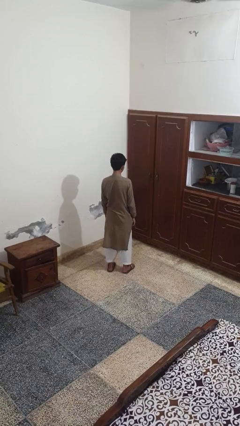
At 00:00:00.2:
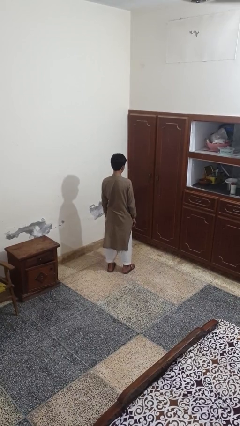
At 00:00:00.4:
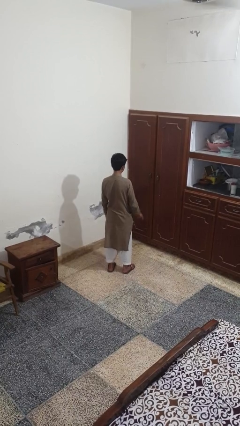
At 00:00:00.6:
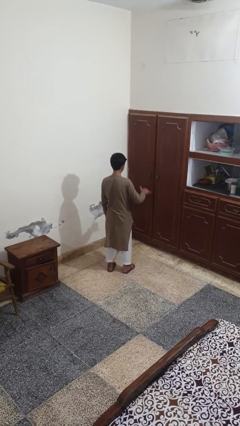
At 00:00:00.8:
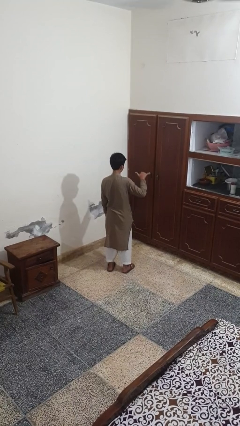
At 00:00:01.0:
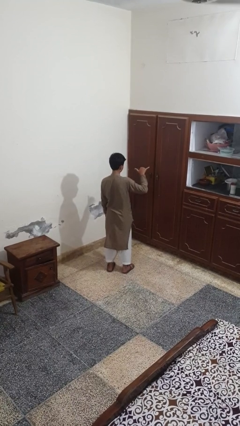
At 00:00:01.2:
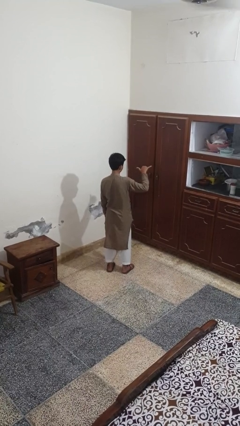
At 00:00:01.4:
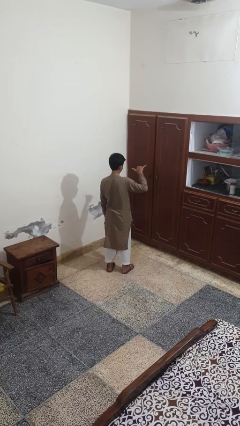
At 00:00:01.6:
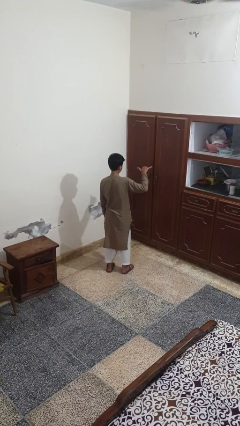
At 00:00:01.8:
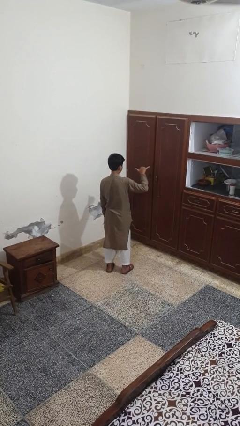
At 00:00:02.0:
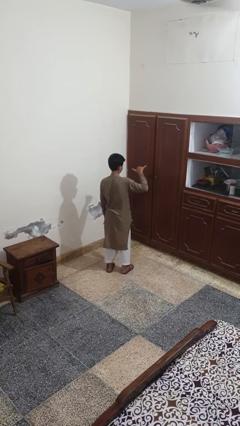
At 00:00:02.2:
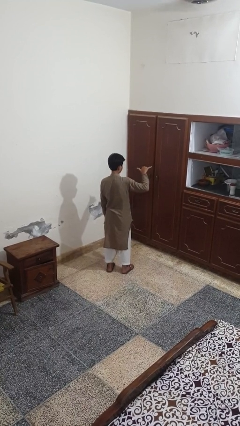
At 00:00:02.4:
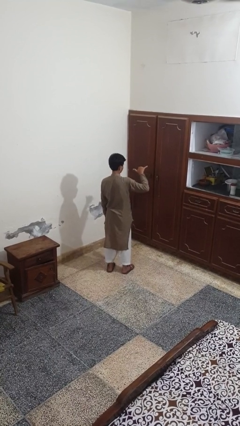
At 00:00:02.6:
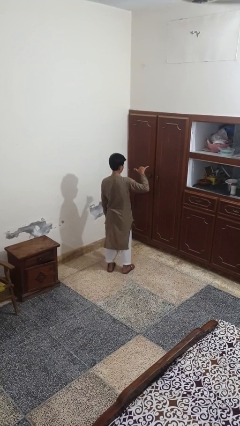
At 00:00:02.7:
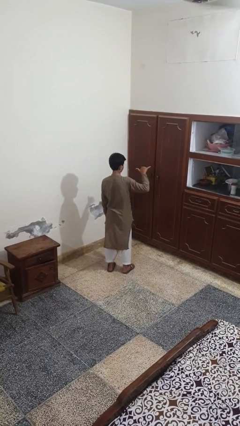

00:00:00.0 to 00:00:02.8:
person gestures hang loose

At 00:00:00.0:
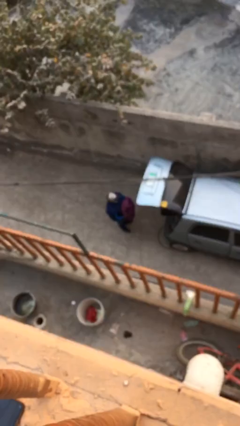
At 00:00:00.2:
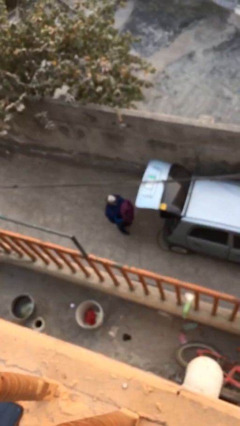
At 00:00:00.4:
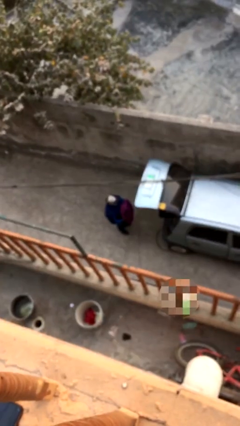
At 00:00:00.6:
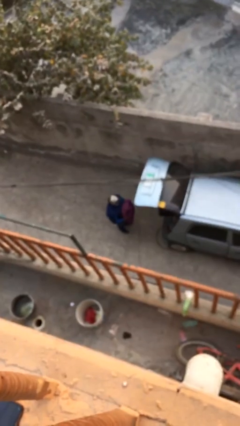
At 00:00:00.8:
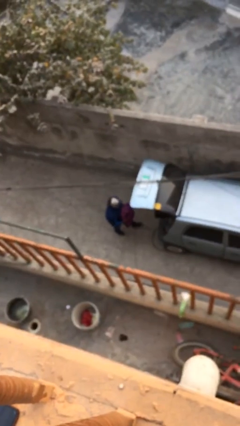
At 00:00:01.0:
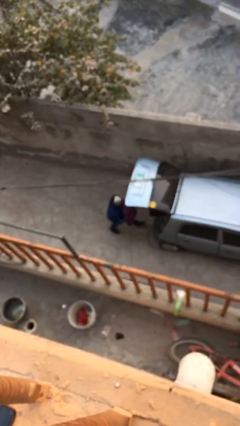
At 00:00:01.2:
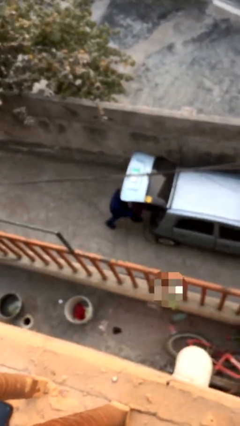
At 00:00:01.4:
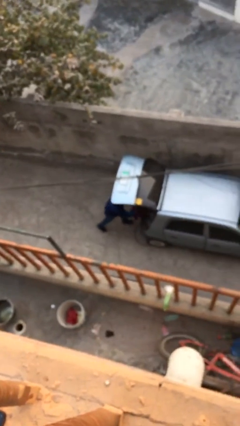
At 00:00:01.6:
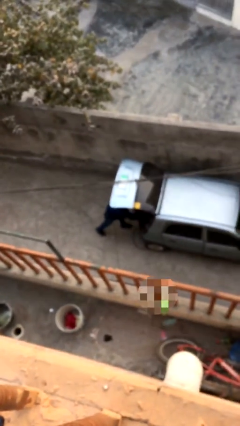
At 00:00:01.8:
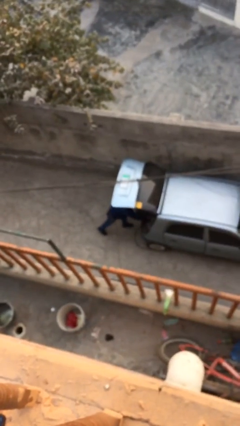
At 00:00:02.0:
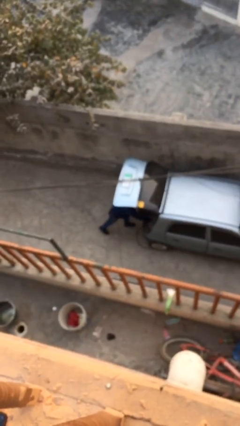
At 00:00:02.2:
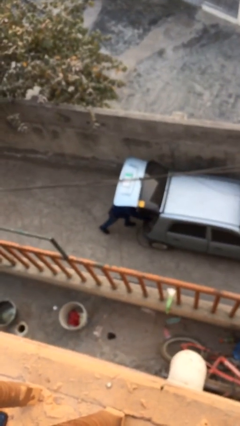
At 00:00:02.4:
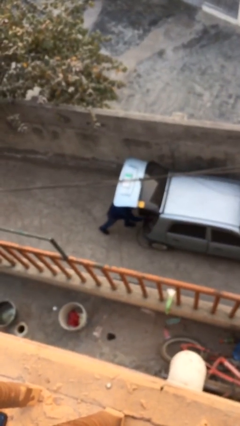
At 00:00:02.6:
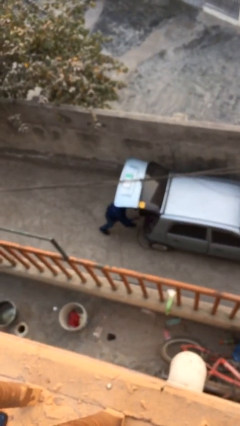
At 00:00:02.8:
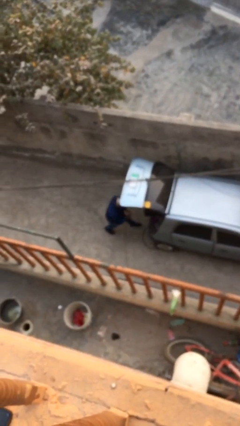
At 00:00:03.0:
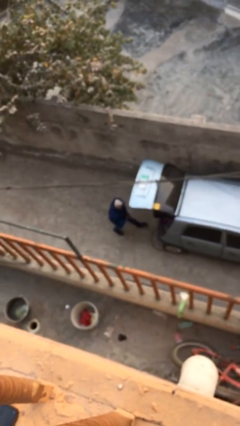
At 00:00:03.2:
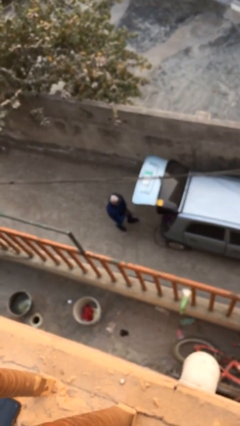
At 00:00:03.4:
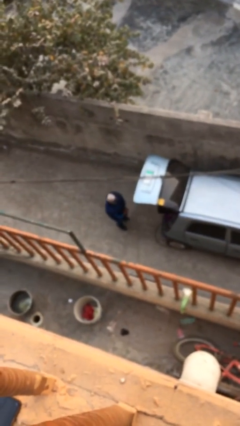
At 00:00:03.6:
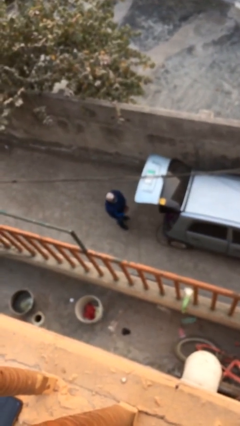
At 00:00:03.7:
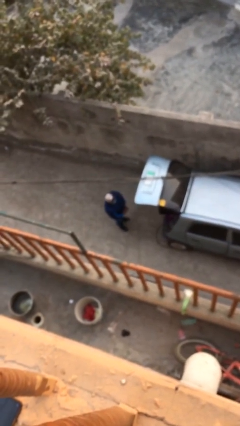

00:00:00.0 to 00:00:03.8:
person loads car

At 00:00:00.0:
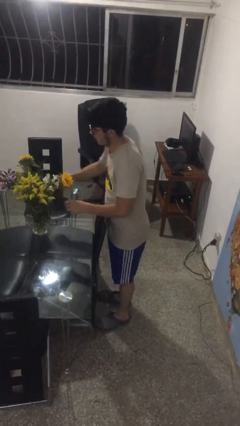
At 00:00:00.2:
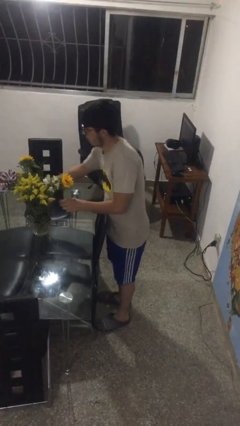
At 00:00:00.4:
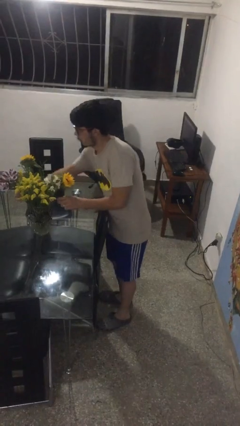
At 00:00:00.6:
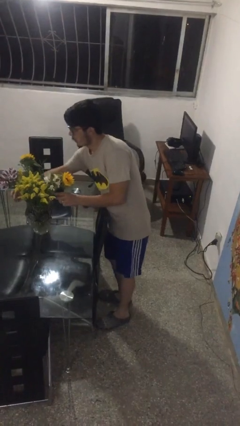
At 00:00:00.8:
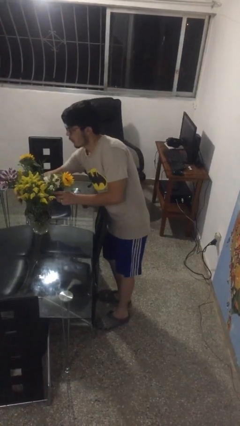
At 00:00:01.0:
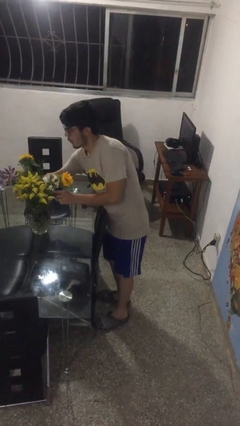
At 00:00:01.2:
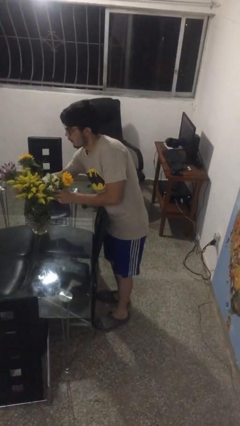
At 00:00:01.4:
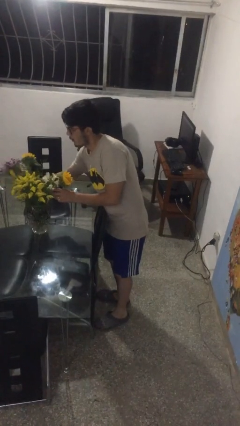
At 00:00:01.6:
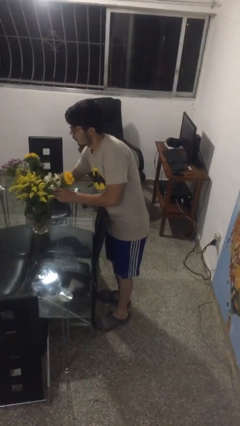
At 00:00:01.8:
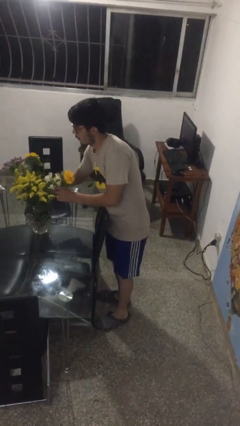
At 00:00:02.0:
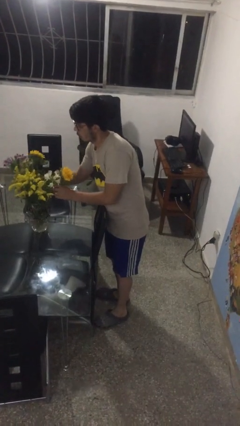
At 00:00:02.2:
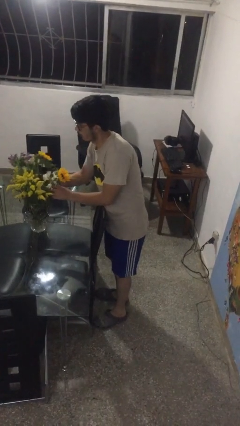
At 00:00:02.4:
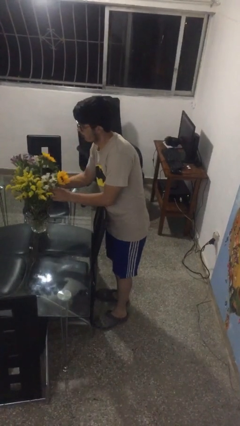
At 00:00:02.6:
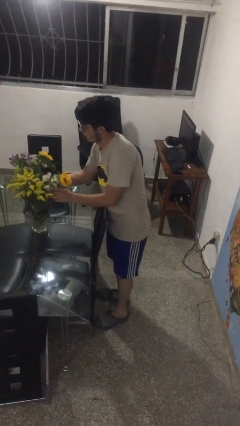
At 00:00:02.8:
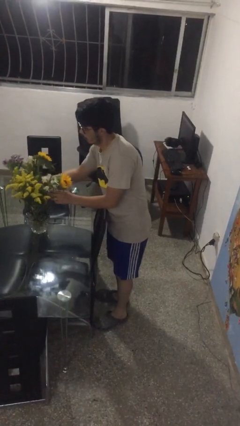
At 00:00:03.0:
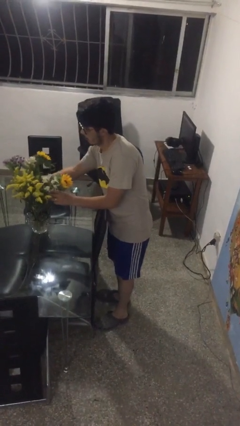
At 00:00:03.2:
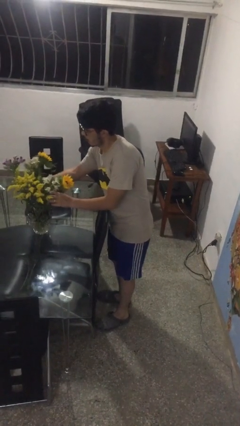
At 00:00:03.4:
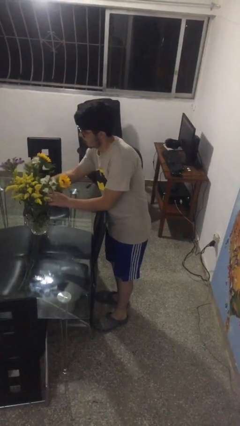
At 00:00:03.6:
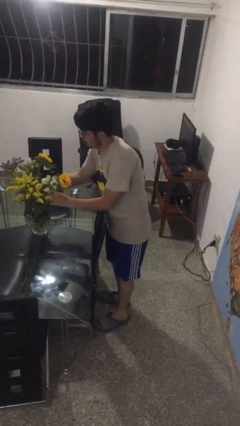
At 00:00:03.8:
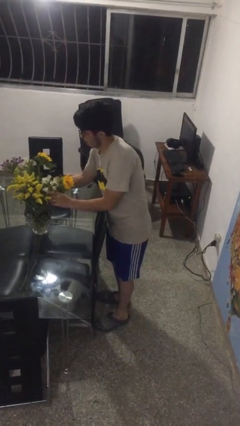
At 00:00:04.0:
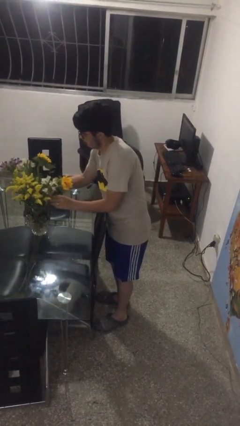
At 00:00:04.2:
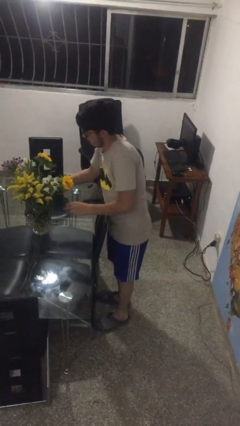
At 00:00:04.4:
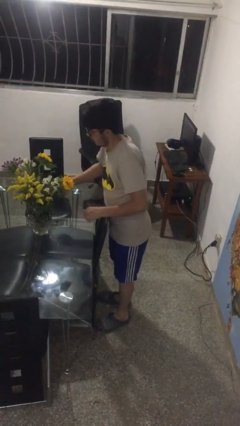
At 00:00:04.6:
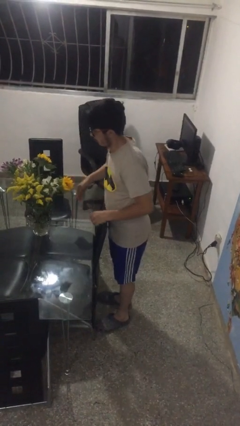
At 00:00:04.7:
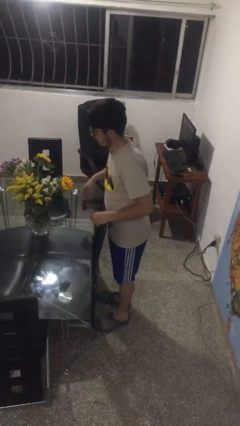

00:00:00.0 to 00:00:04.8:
person arranges flowers in vase

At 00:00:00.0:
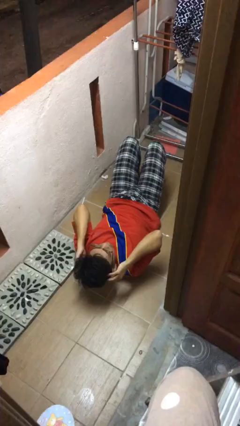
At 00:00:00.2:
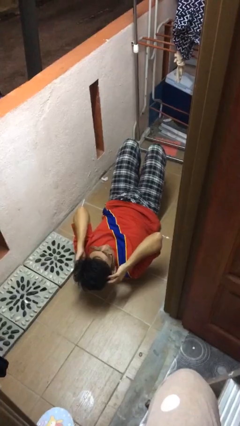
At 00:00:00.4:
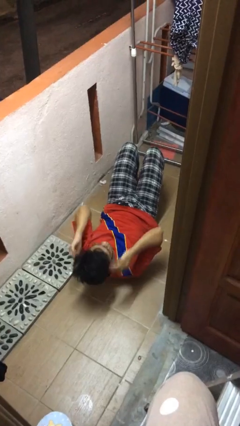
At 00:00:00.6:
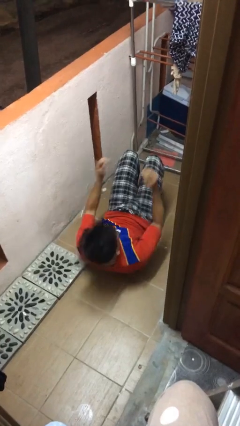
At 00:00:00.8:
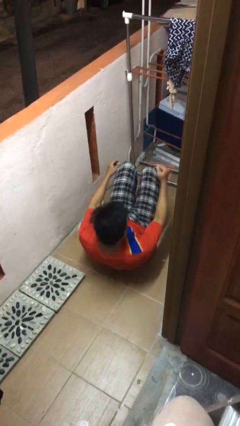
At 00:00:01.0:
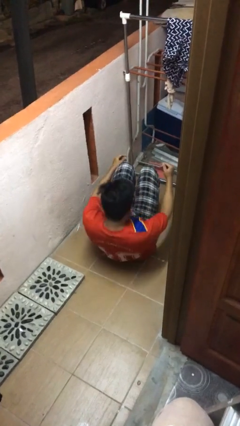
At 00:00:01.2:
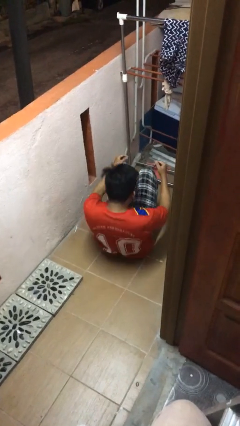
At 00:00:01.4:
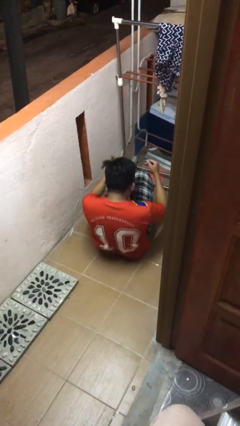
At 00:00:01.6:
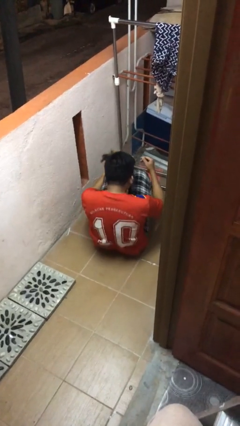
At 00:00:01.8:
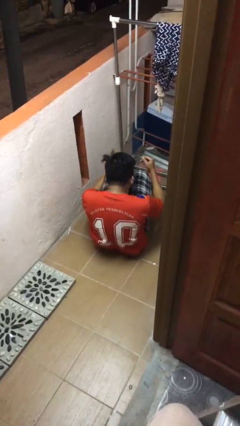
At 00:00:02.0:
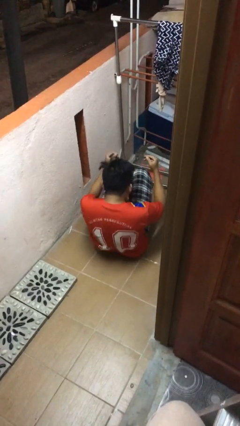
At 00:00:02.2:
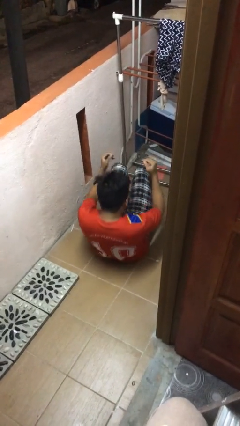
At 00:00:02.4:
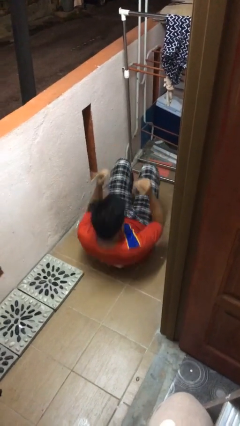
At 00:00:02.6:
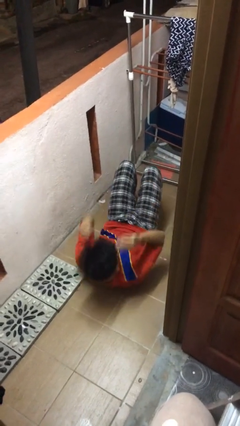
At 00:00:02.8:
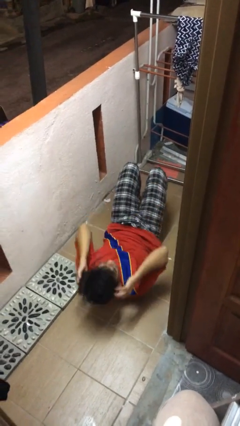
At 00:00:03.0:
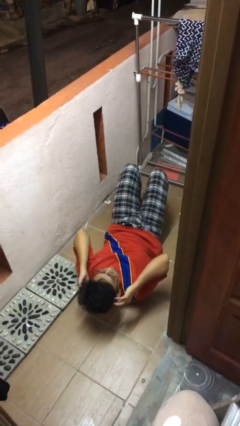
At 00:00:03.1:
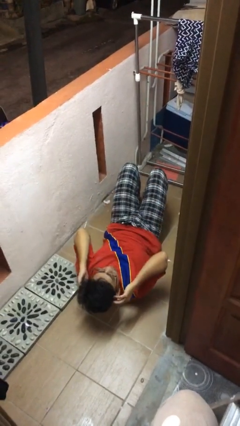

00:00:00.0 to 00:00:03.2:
person exercises with situp

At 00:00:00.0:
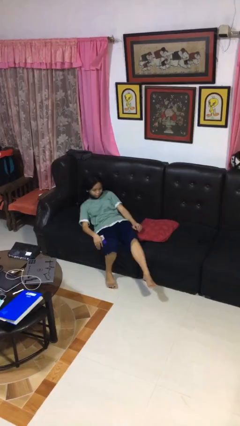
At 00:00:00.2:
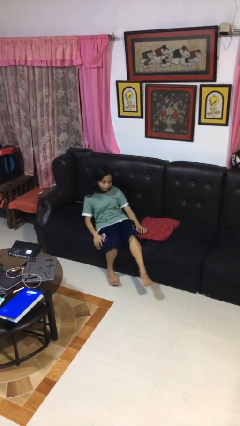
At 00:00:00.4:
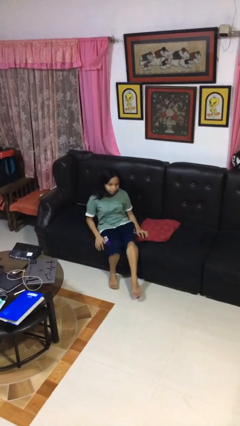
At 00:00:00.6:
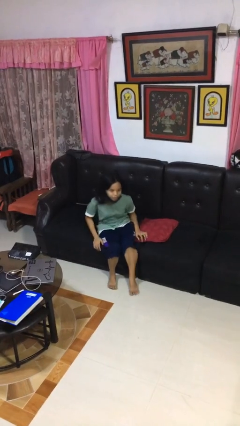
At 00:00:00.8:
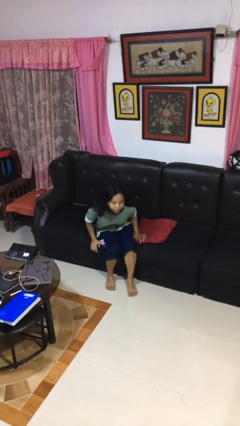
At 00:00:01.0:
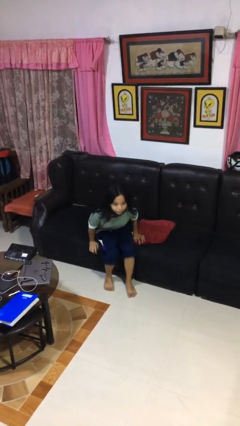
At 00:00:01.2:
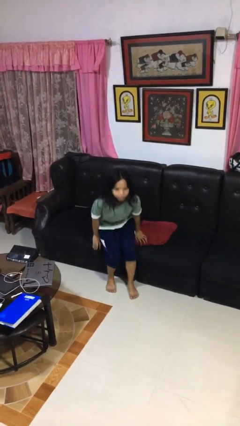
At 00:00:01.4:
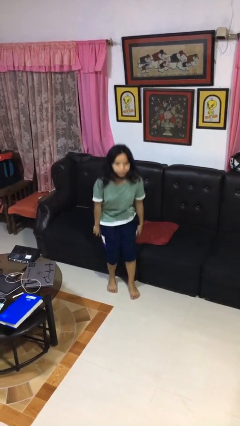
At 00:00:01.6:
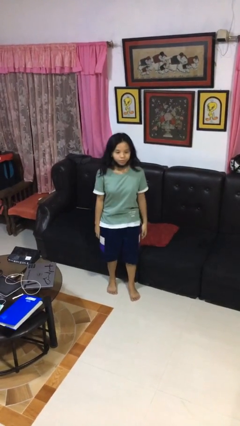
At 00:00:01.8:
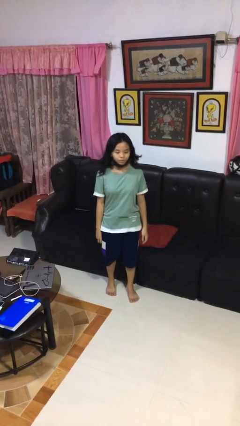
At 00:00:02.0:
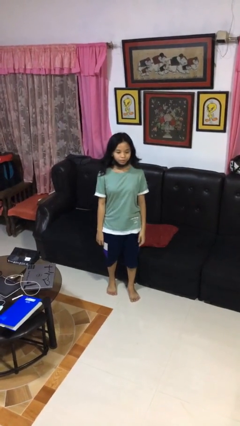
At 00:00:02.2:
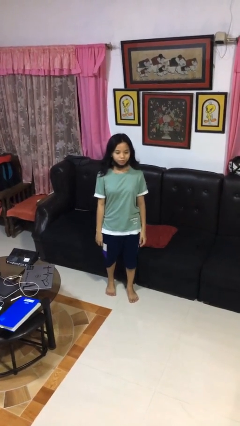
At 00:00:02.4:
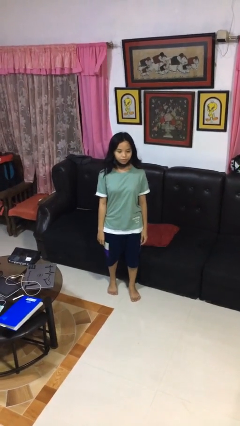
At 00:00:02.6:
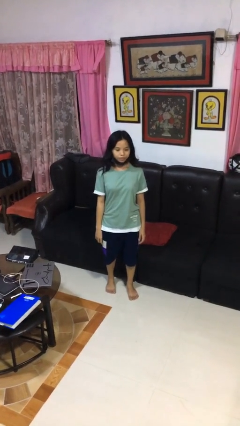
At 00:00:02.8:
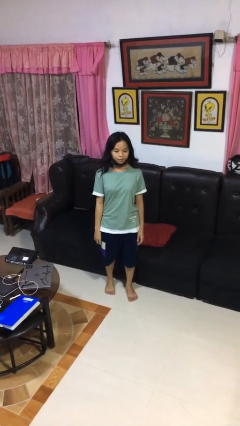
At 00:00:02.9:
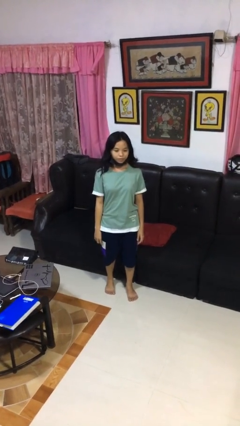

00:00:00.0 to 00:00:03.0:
person stands up
